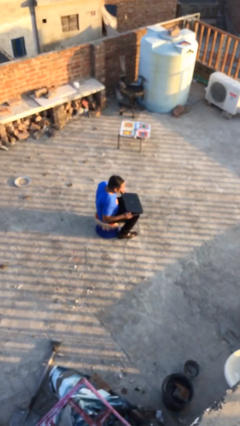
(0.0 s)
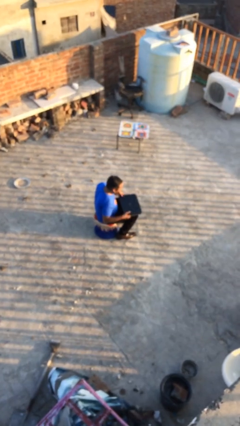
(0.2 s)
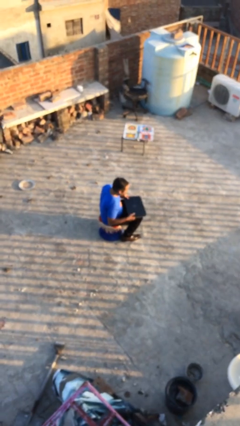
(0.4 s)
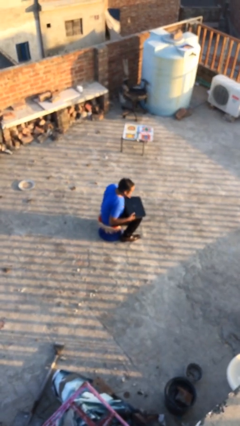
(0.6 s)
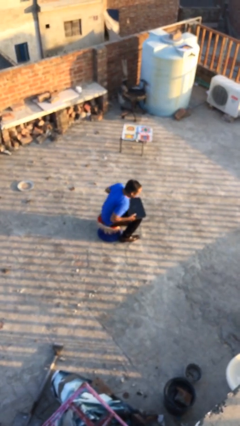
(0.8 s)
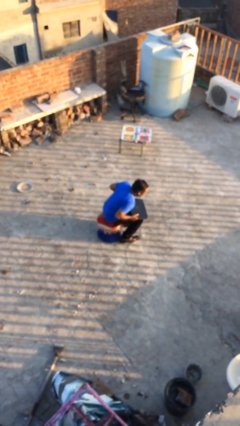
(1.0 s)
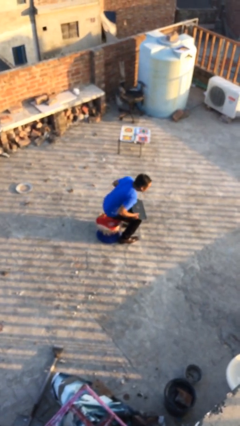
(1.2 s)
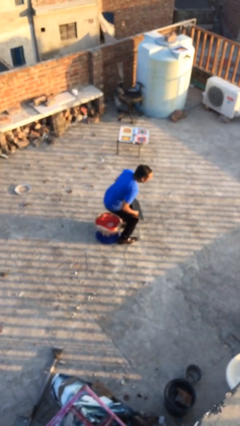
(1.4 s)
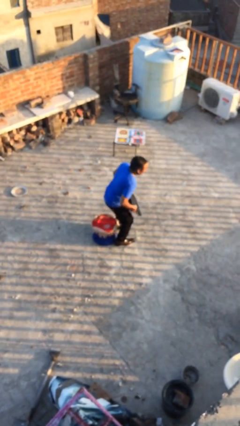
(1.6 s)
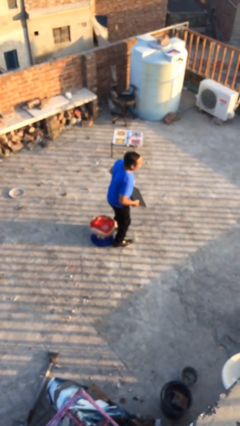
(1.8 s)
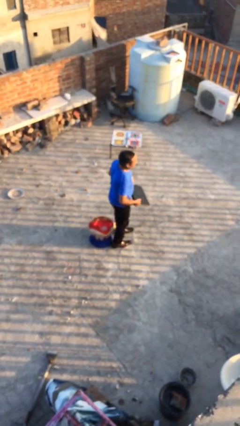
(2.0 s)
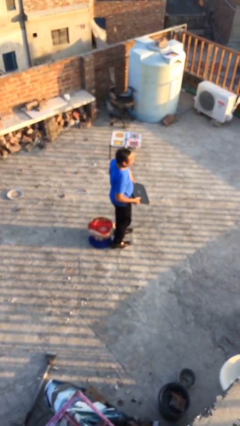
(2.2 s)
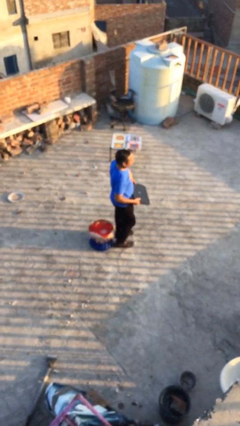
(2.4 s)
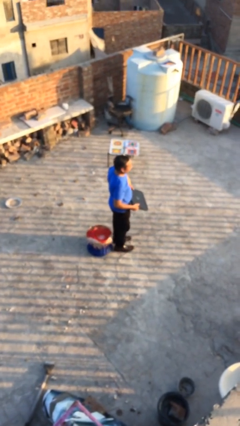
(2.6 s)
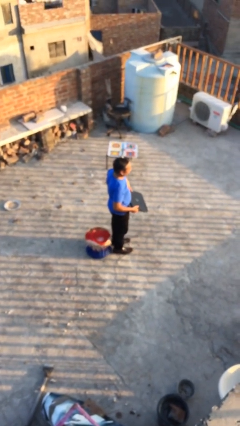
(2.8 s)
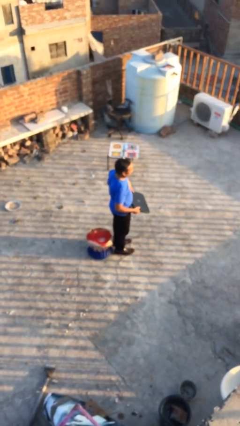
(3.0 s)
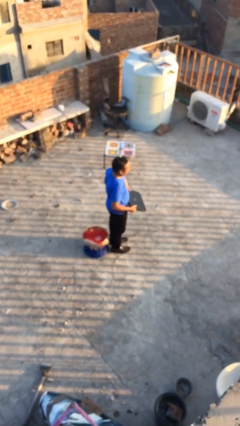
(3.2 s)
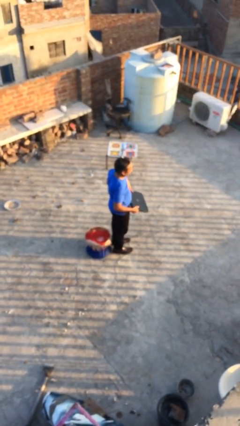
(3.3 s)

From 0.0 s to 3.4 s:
person stands up

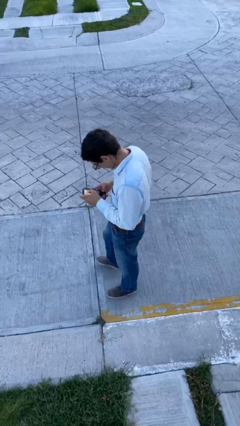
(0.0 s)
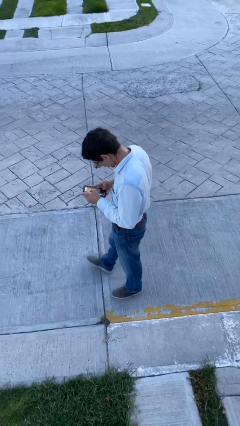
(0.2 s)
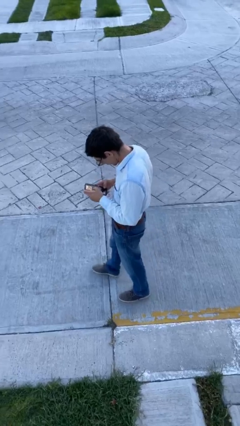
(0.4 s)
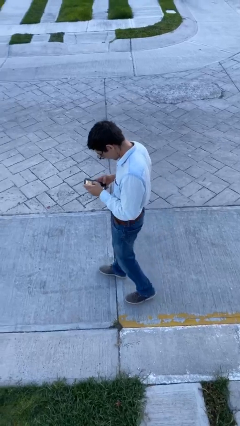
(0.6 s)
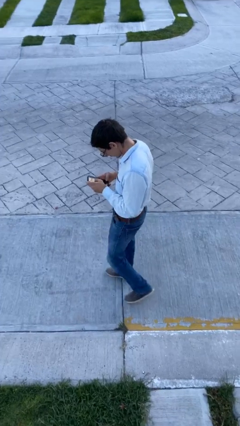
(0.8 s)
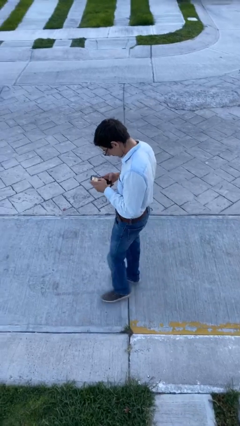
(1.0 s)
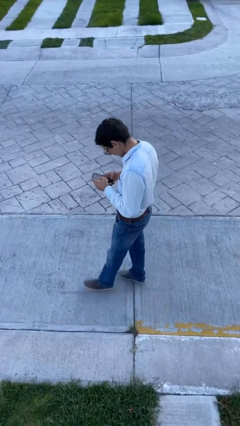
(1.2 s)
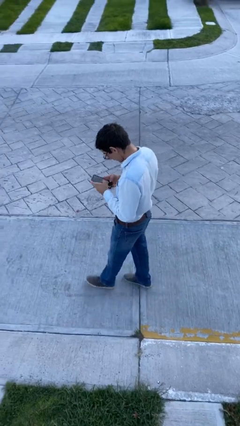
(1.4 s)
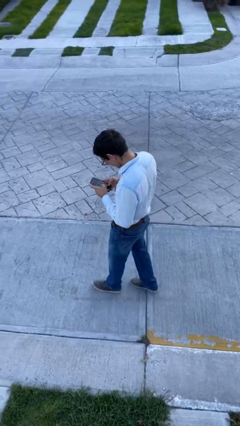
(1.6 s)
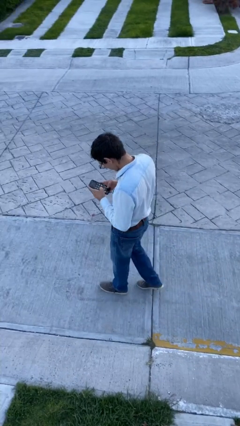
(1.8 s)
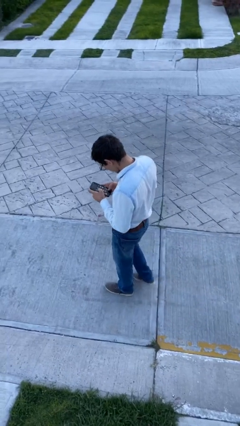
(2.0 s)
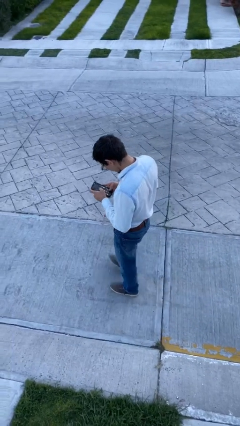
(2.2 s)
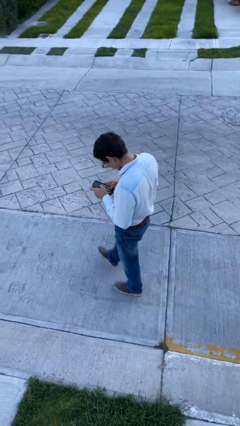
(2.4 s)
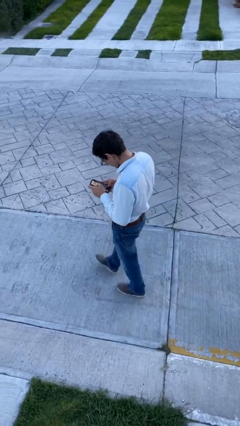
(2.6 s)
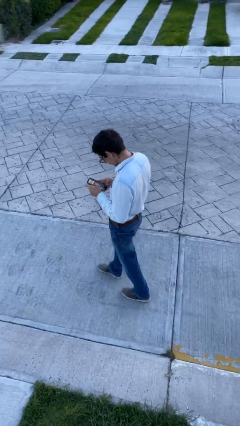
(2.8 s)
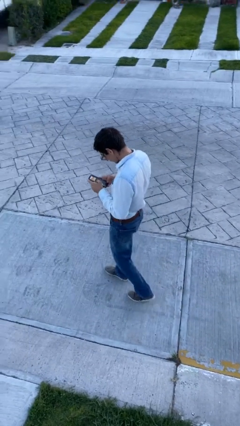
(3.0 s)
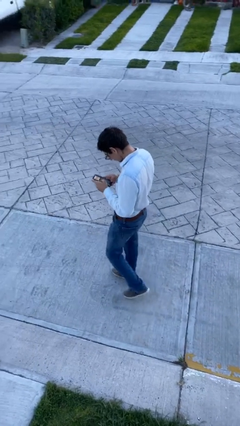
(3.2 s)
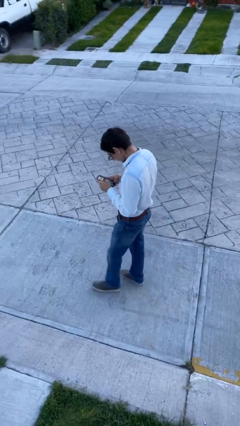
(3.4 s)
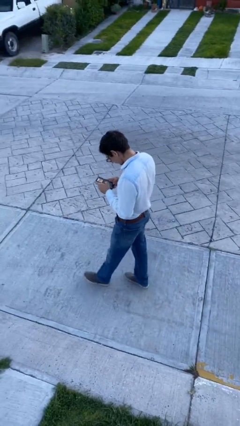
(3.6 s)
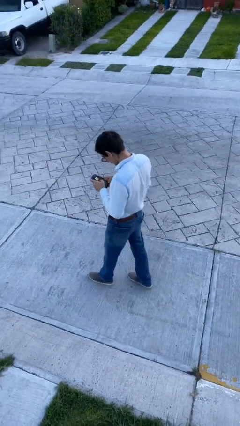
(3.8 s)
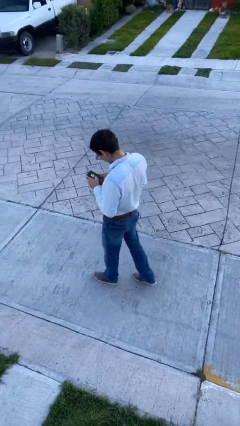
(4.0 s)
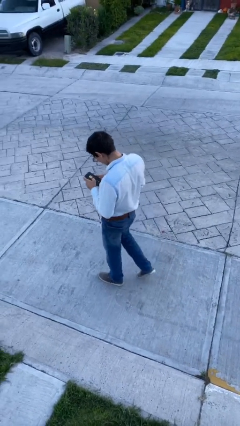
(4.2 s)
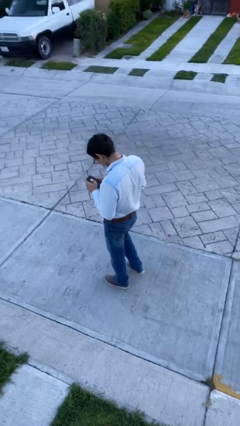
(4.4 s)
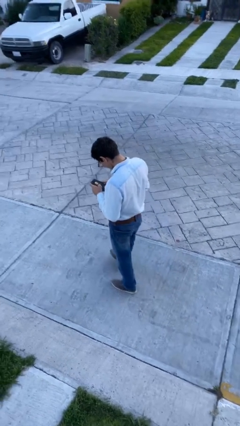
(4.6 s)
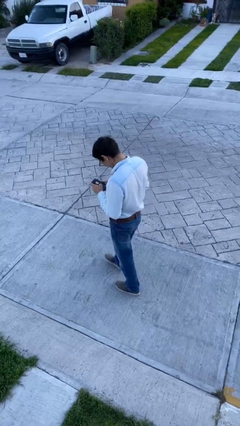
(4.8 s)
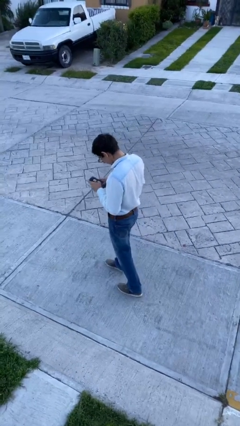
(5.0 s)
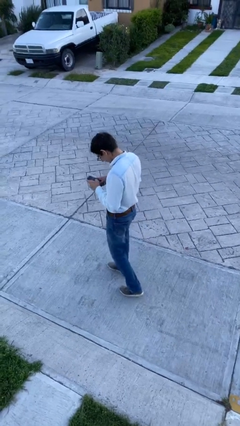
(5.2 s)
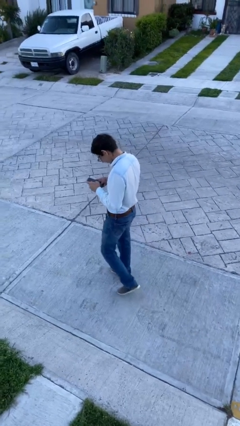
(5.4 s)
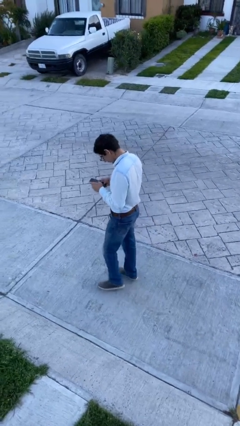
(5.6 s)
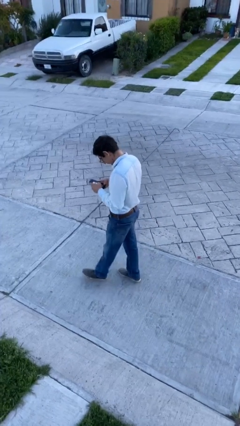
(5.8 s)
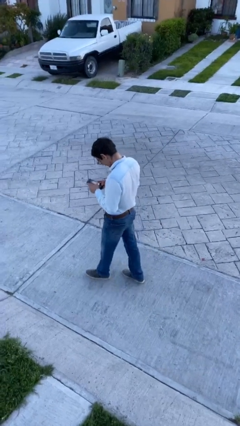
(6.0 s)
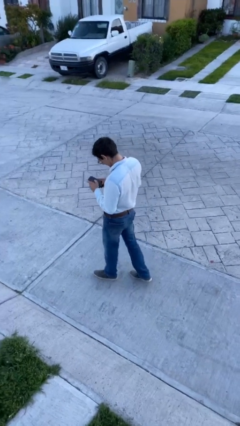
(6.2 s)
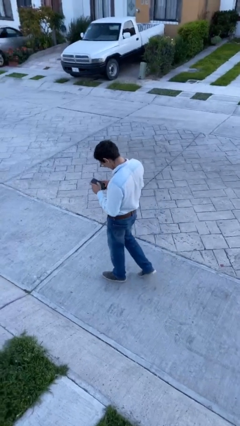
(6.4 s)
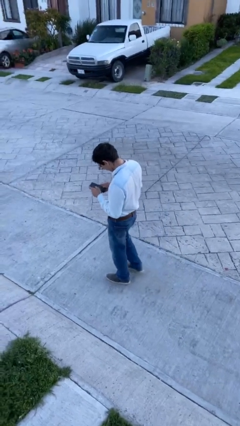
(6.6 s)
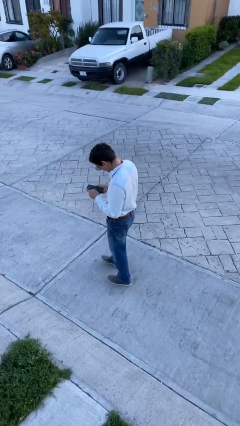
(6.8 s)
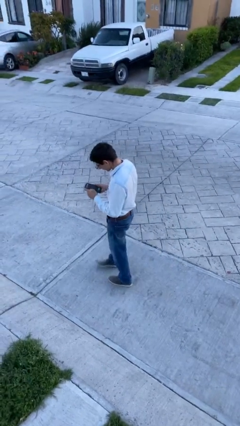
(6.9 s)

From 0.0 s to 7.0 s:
person texts on phone

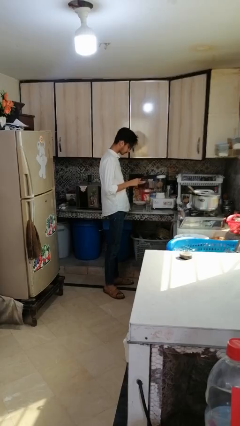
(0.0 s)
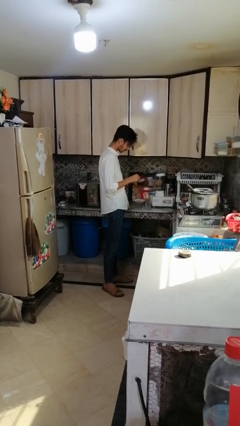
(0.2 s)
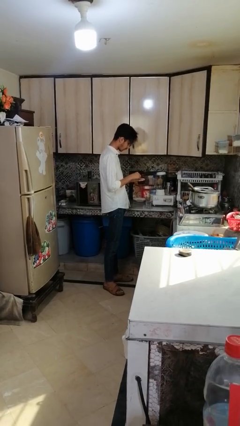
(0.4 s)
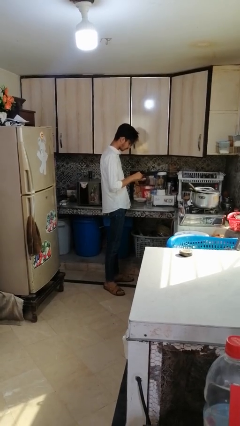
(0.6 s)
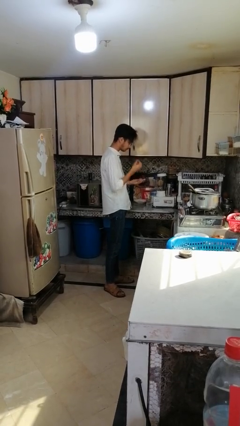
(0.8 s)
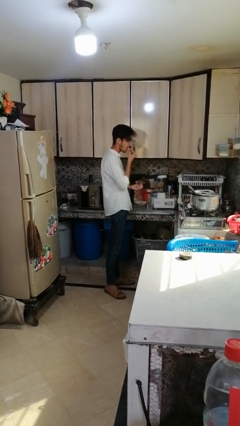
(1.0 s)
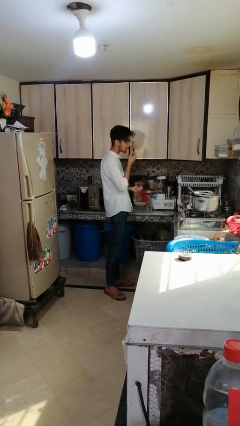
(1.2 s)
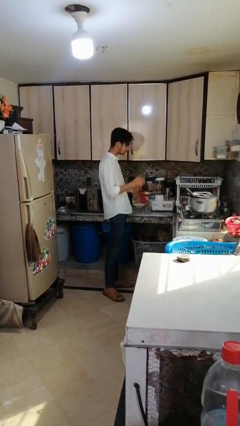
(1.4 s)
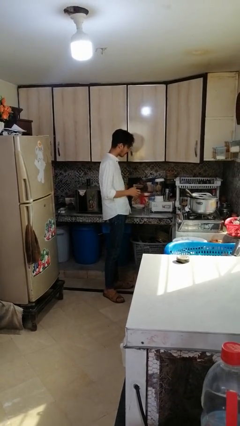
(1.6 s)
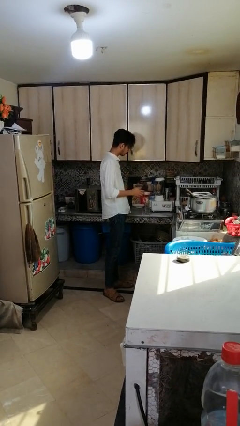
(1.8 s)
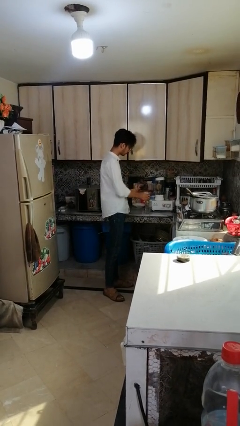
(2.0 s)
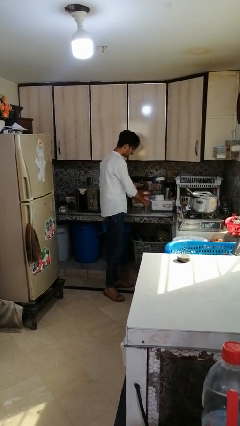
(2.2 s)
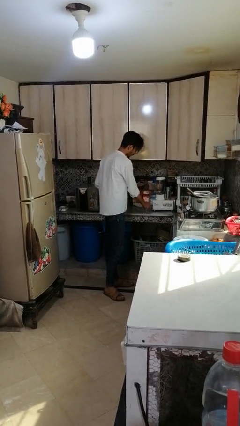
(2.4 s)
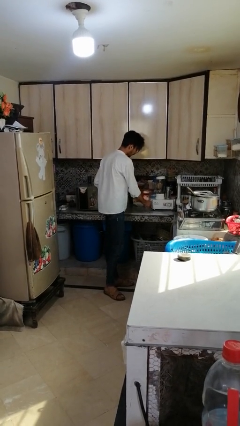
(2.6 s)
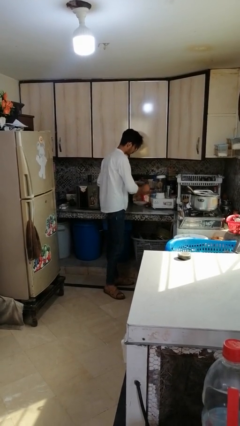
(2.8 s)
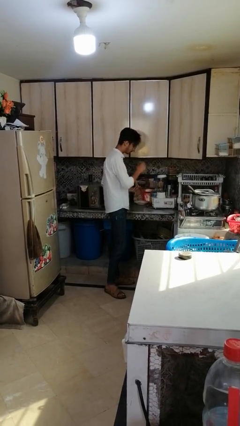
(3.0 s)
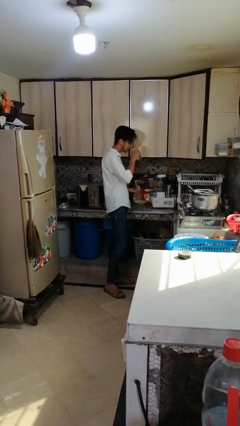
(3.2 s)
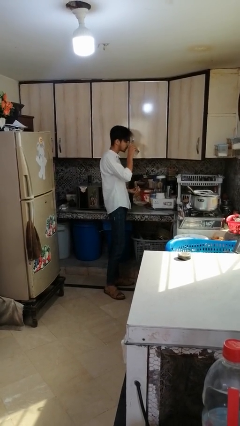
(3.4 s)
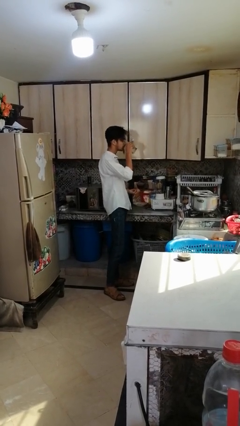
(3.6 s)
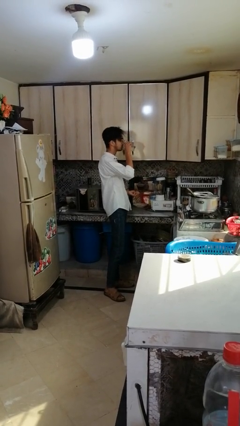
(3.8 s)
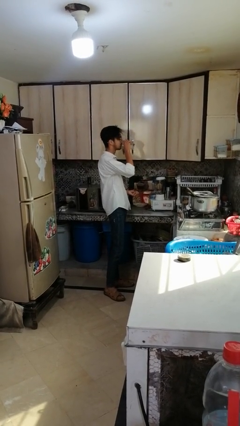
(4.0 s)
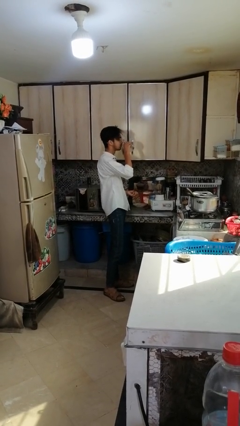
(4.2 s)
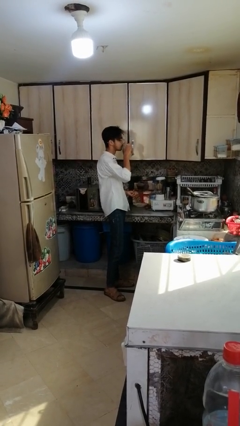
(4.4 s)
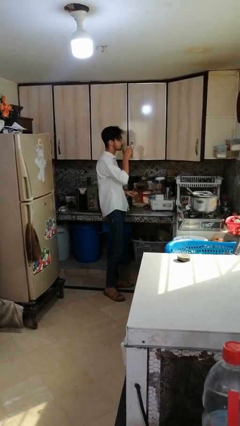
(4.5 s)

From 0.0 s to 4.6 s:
person takes medicine pills

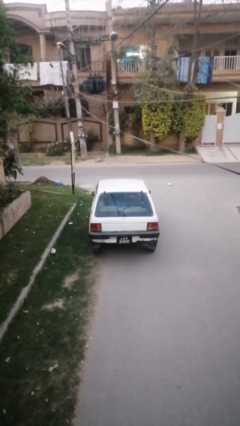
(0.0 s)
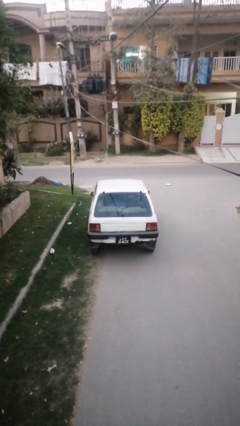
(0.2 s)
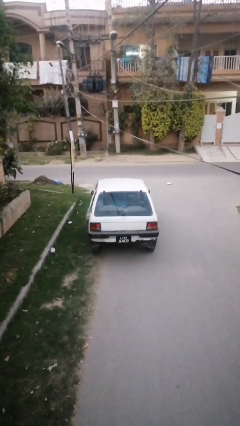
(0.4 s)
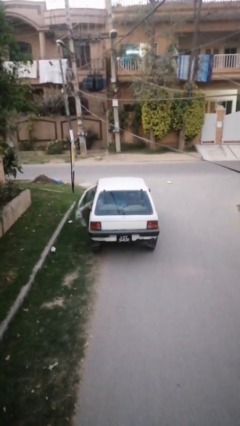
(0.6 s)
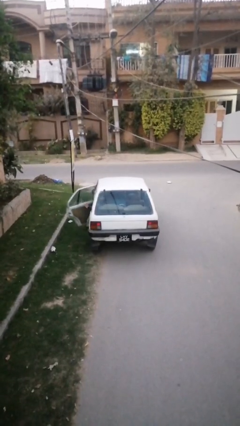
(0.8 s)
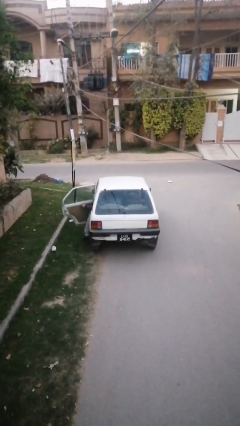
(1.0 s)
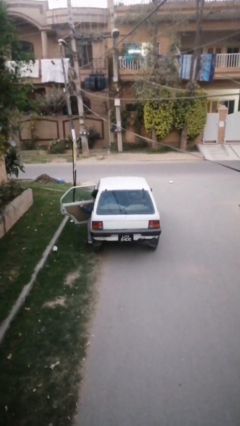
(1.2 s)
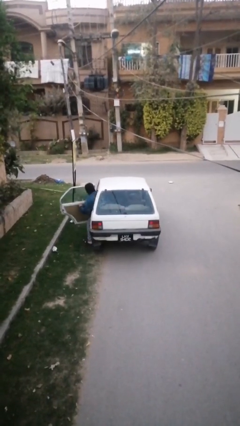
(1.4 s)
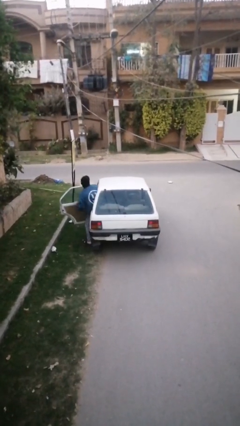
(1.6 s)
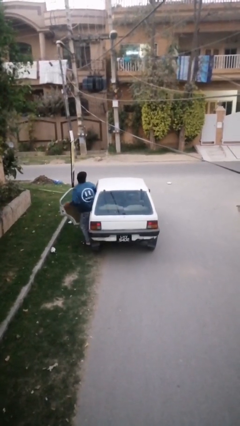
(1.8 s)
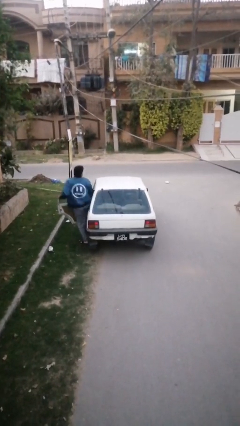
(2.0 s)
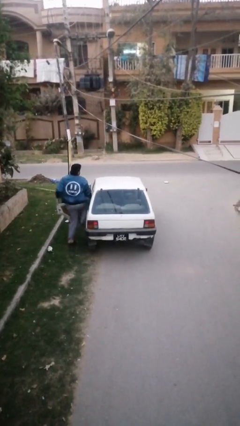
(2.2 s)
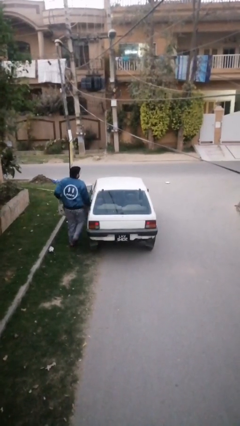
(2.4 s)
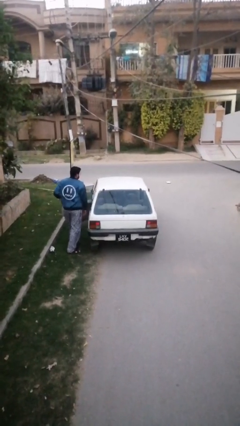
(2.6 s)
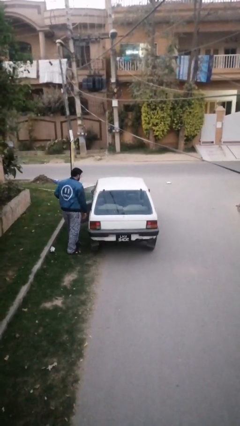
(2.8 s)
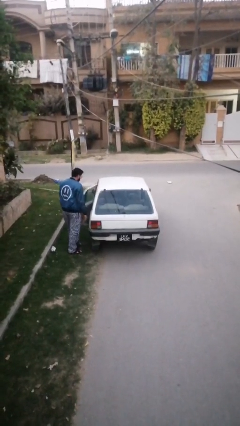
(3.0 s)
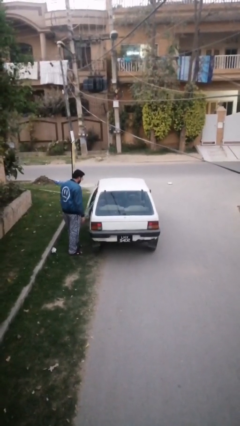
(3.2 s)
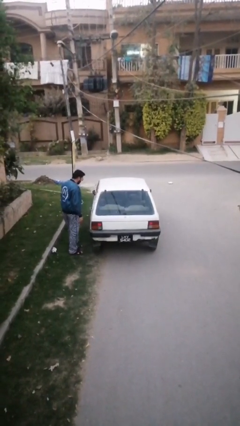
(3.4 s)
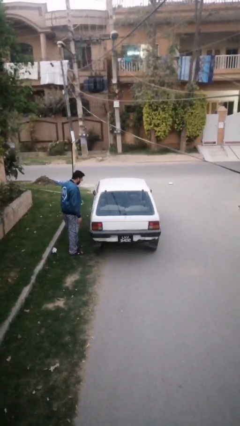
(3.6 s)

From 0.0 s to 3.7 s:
car drops off person
